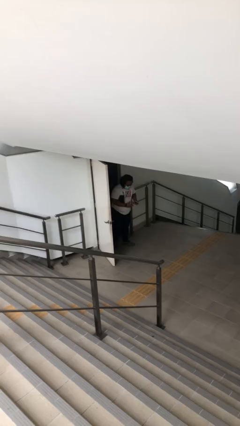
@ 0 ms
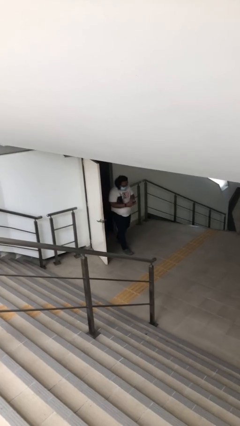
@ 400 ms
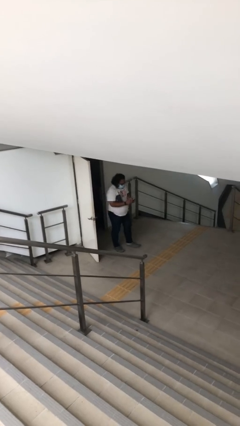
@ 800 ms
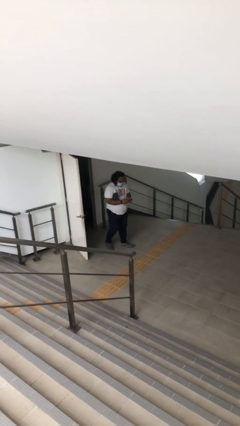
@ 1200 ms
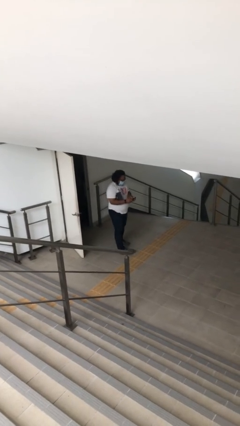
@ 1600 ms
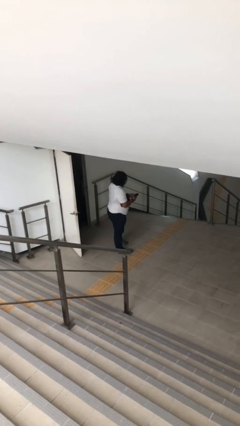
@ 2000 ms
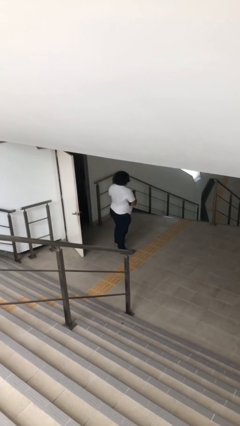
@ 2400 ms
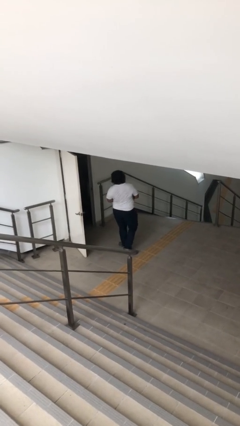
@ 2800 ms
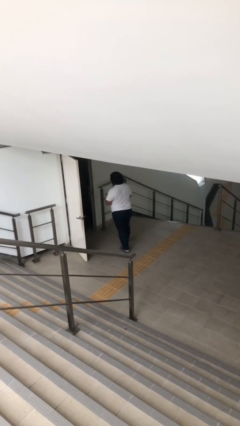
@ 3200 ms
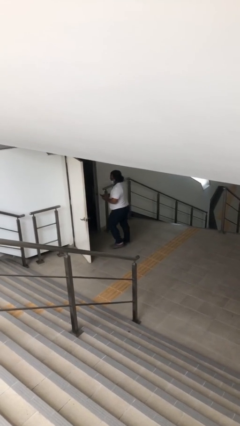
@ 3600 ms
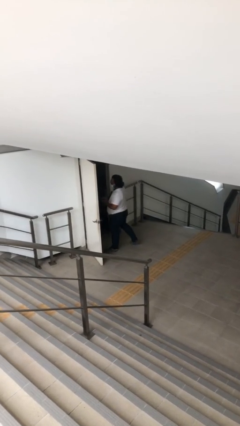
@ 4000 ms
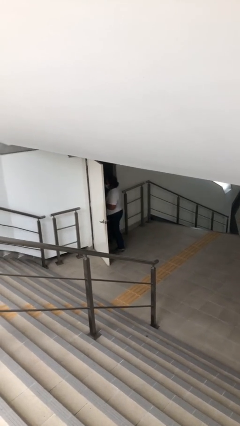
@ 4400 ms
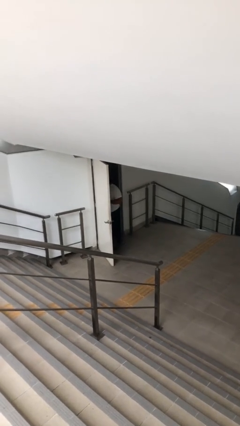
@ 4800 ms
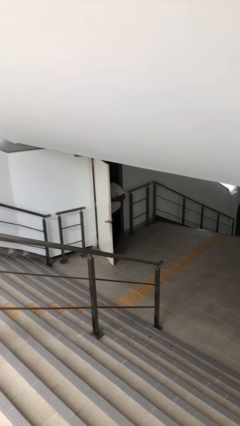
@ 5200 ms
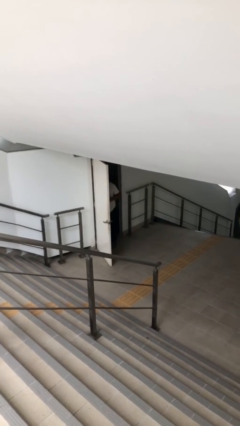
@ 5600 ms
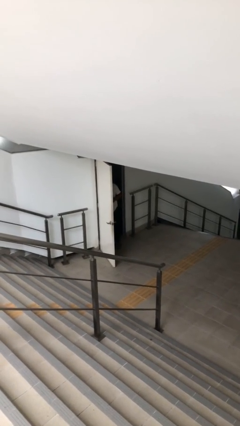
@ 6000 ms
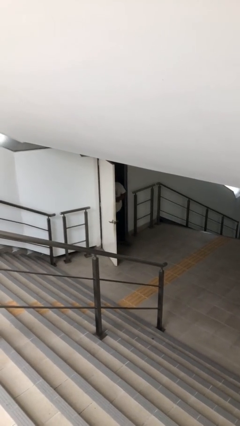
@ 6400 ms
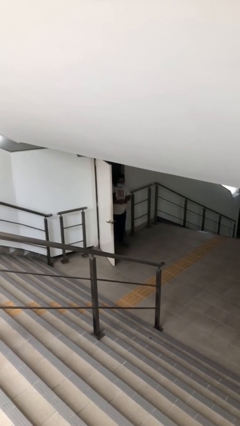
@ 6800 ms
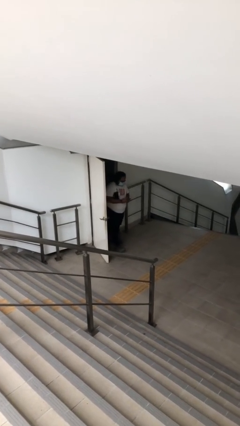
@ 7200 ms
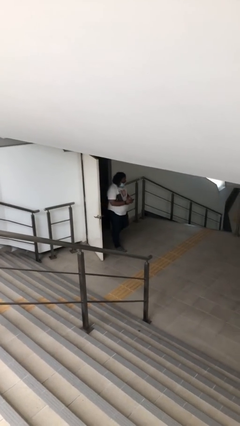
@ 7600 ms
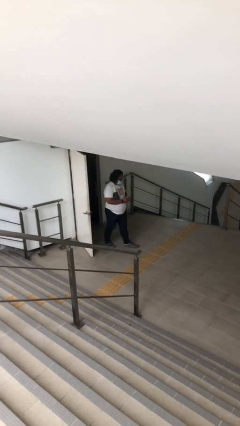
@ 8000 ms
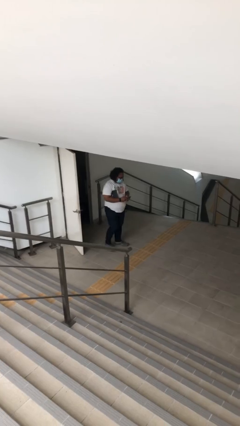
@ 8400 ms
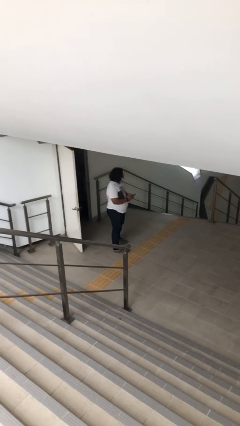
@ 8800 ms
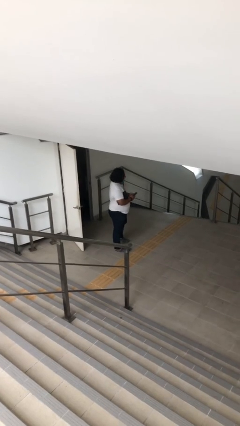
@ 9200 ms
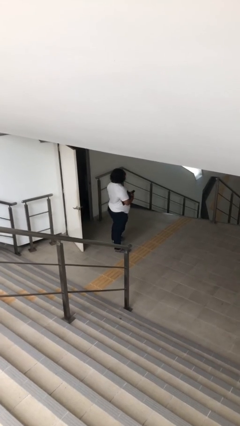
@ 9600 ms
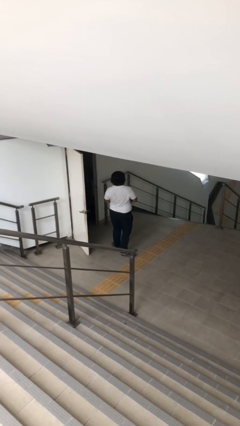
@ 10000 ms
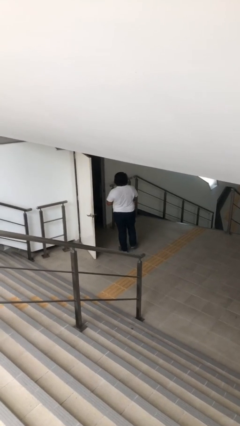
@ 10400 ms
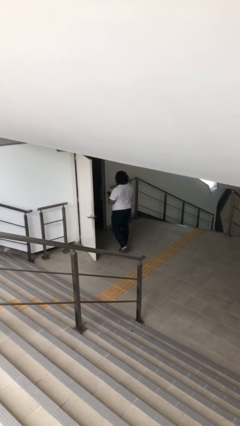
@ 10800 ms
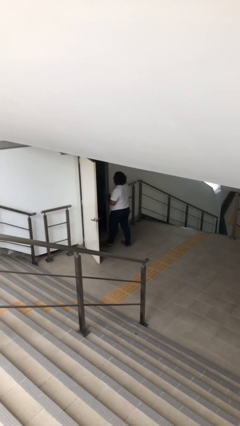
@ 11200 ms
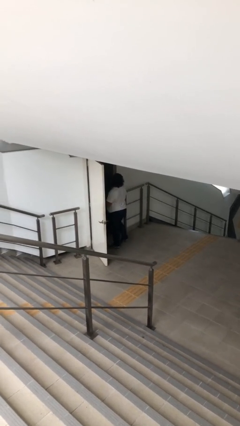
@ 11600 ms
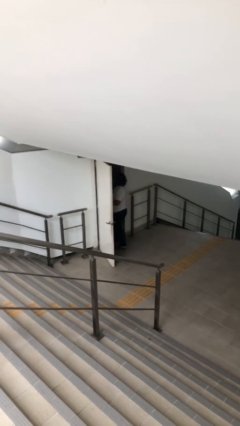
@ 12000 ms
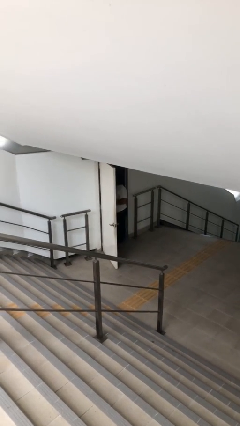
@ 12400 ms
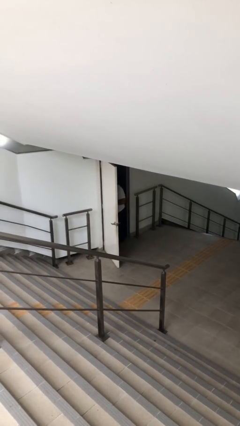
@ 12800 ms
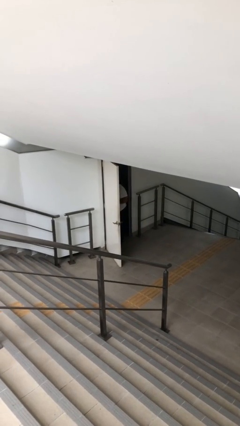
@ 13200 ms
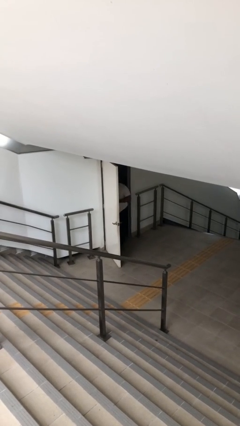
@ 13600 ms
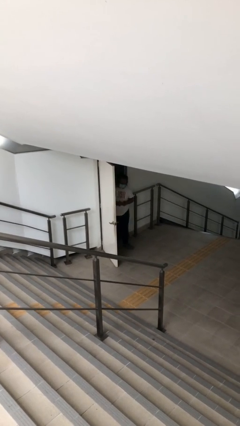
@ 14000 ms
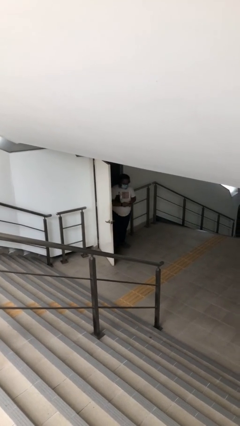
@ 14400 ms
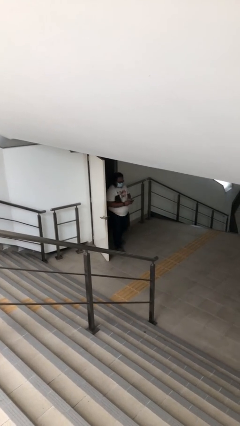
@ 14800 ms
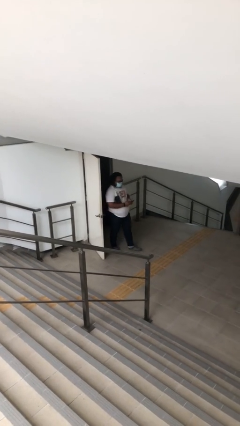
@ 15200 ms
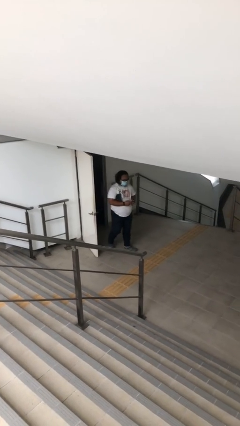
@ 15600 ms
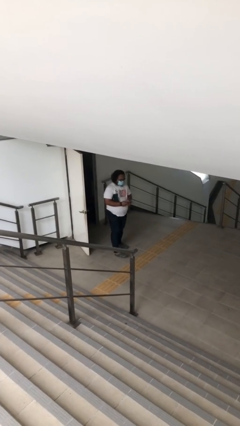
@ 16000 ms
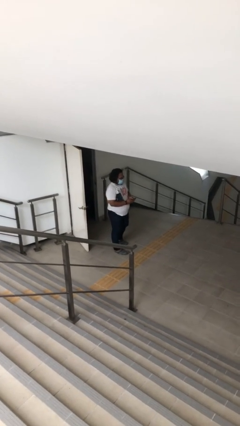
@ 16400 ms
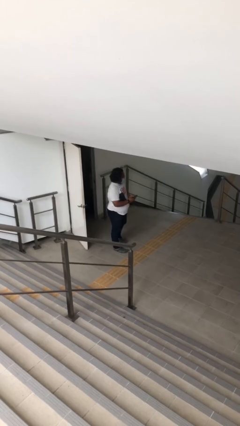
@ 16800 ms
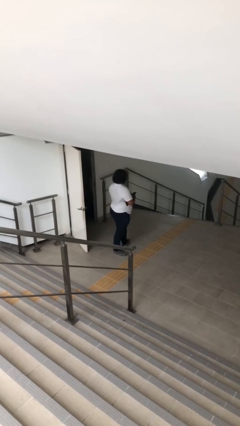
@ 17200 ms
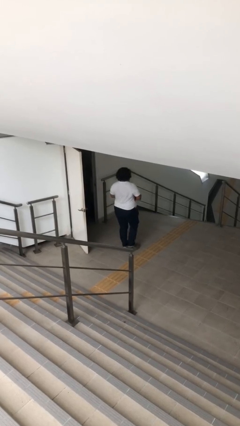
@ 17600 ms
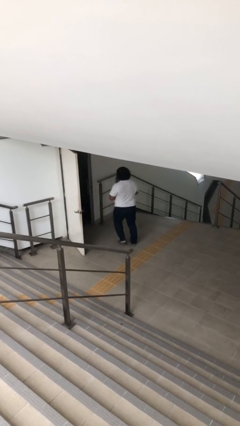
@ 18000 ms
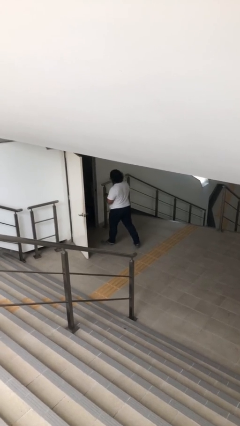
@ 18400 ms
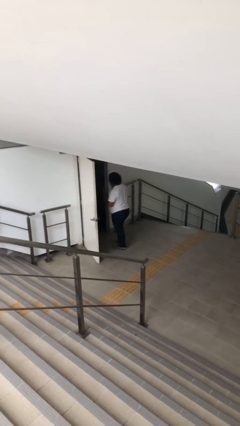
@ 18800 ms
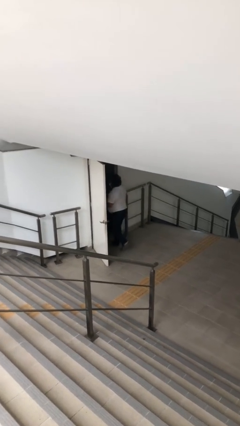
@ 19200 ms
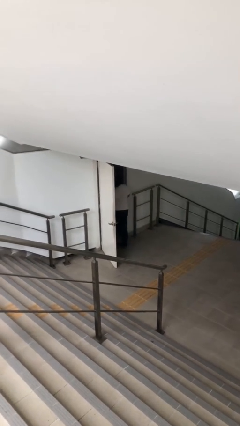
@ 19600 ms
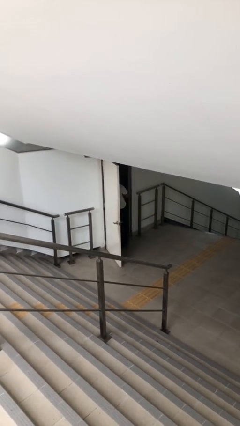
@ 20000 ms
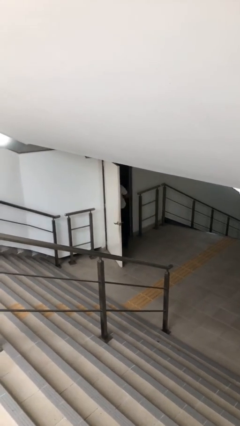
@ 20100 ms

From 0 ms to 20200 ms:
person texts on phone

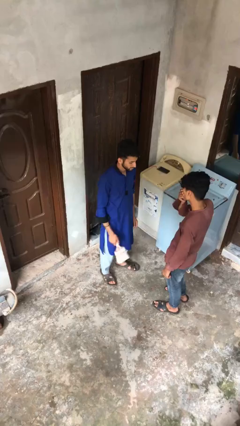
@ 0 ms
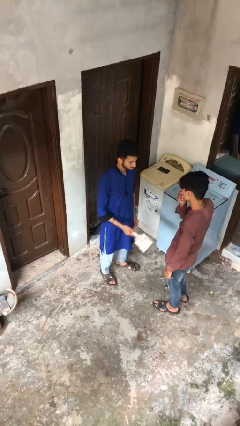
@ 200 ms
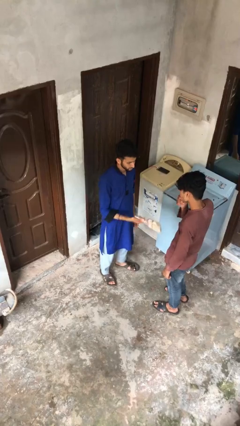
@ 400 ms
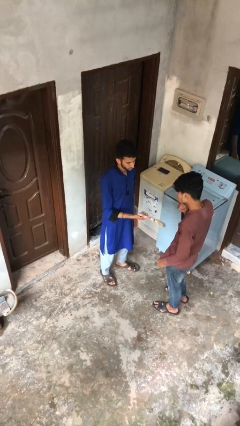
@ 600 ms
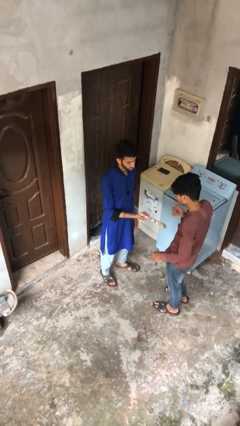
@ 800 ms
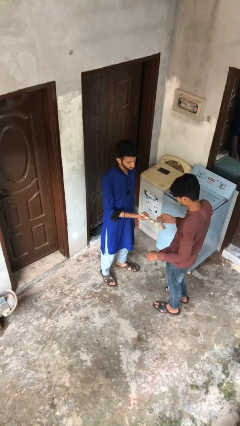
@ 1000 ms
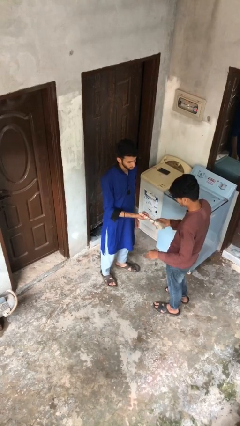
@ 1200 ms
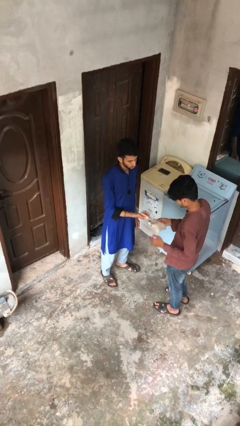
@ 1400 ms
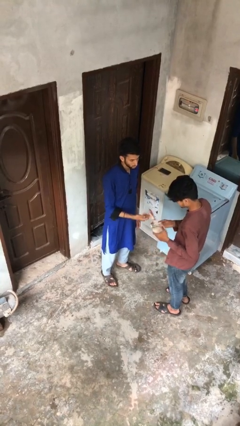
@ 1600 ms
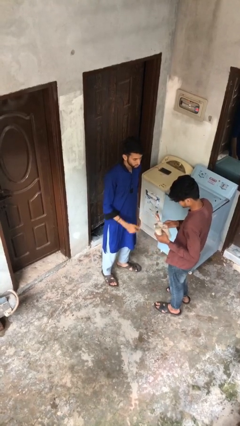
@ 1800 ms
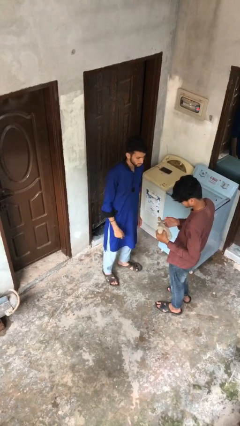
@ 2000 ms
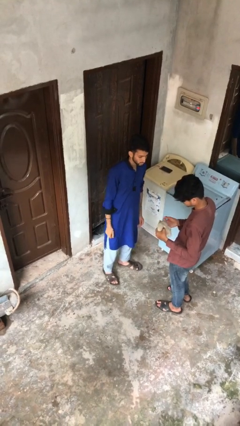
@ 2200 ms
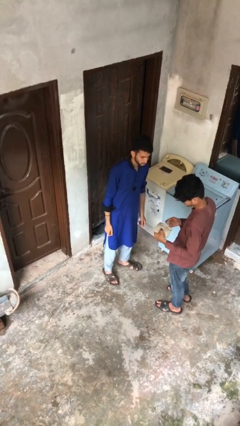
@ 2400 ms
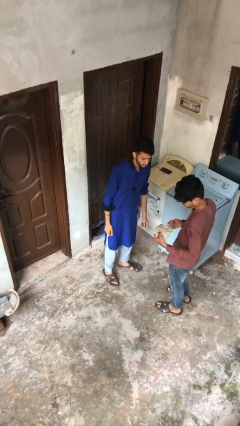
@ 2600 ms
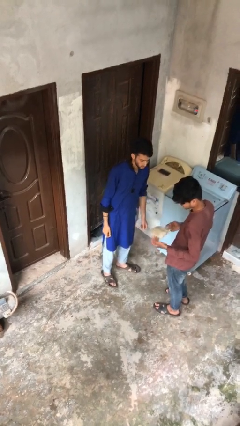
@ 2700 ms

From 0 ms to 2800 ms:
person transfers object to person

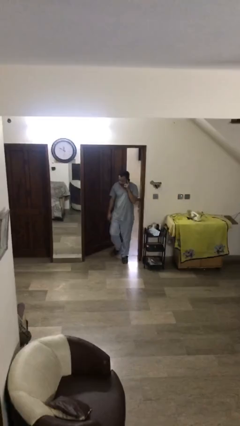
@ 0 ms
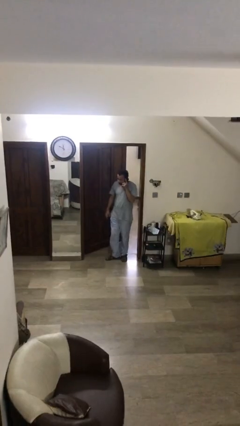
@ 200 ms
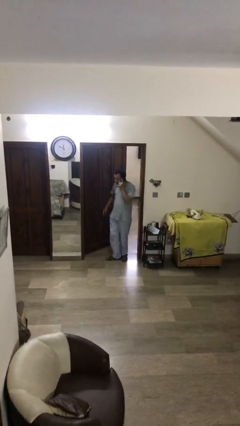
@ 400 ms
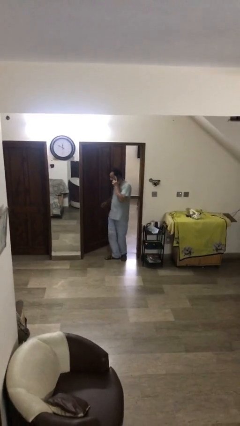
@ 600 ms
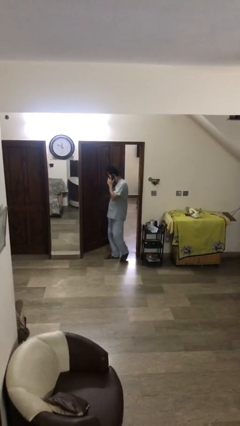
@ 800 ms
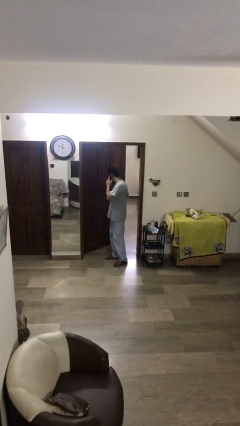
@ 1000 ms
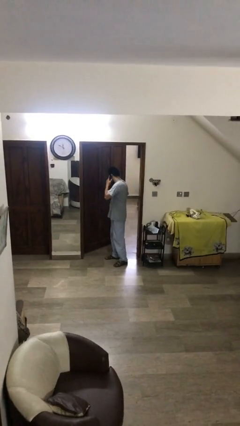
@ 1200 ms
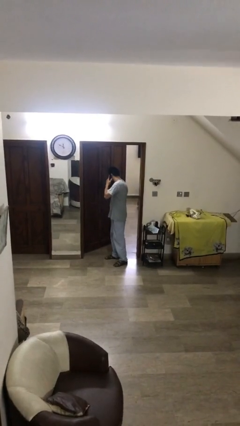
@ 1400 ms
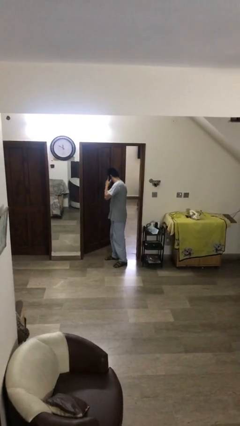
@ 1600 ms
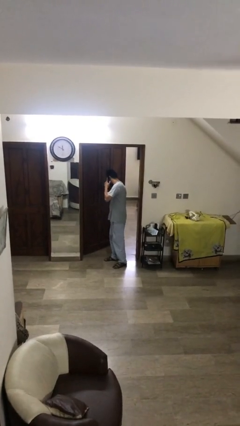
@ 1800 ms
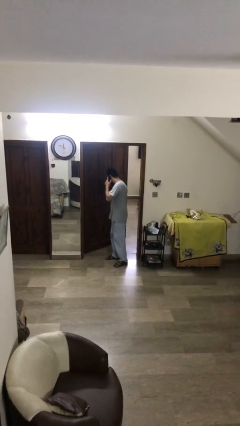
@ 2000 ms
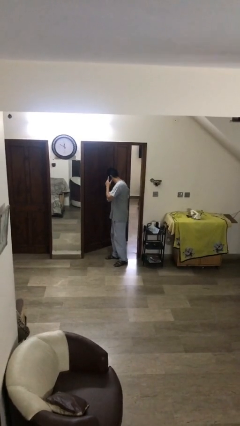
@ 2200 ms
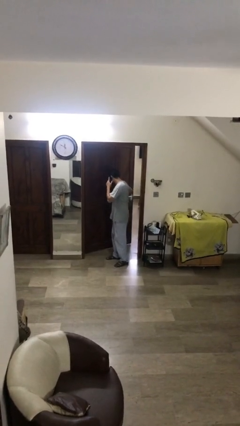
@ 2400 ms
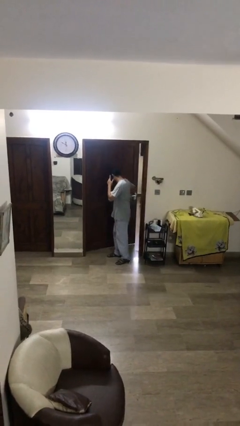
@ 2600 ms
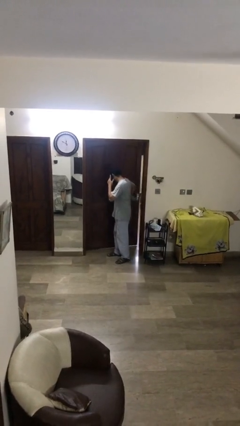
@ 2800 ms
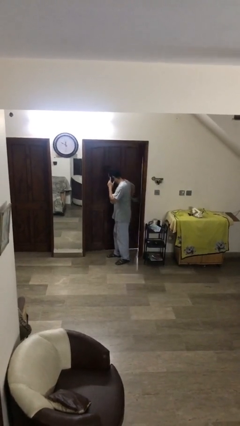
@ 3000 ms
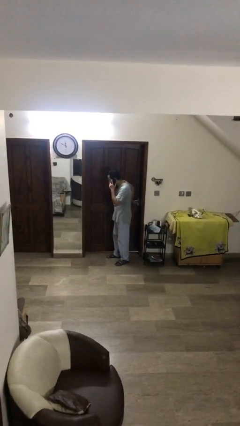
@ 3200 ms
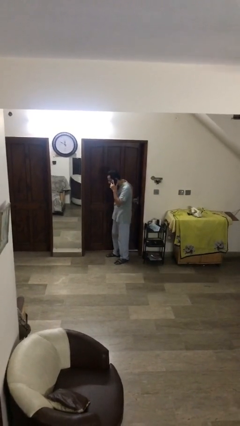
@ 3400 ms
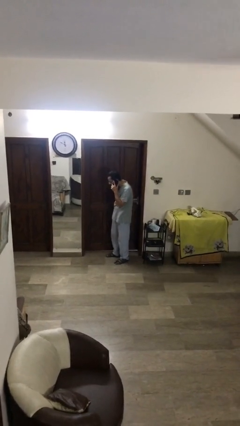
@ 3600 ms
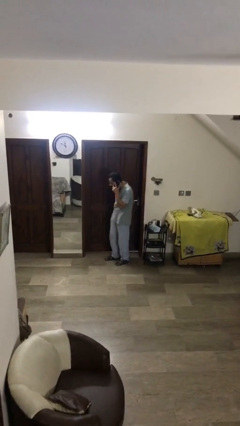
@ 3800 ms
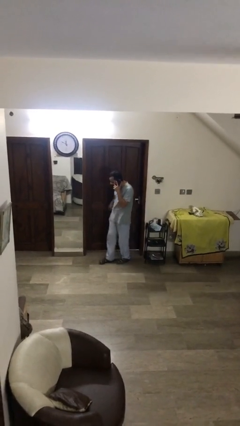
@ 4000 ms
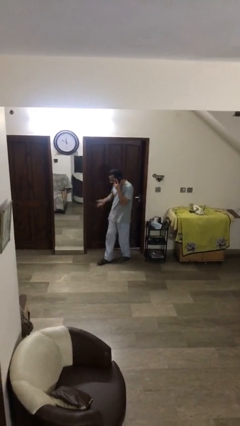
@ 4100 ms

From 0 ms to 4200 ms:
person closes facility door

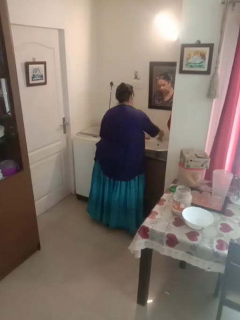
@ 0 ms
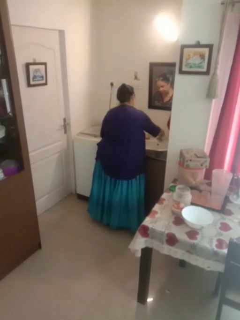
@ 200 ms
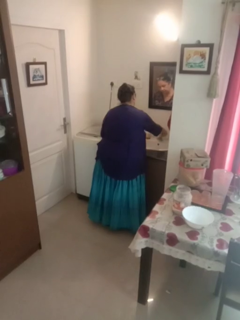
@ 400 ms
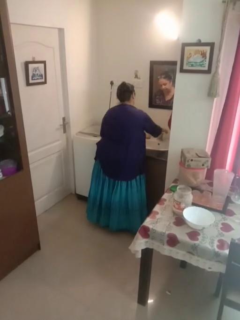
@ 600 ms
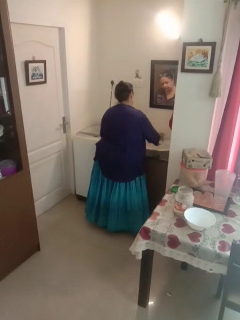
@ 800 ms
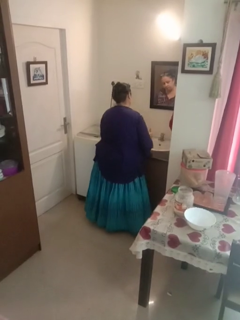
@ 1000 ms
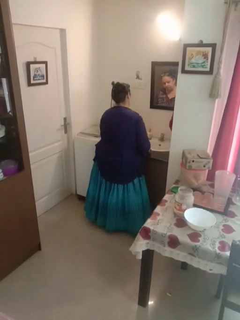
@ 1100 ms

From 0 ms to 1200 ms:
person turns on faucet
